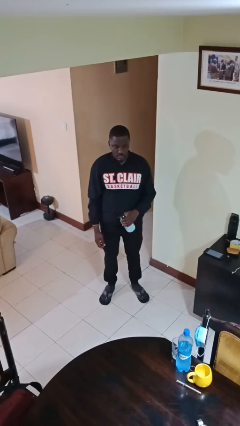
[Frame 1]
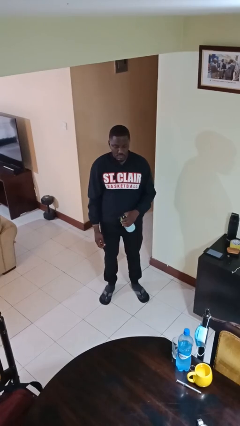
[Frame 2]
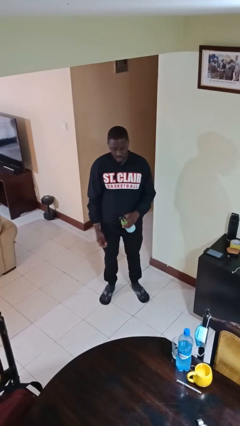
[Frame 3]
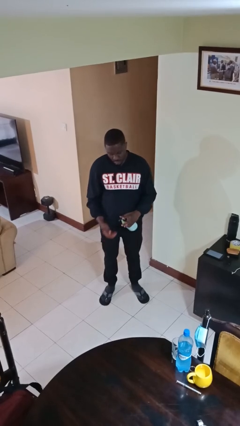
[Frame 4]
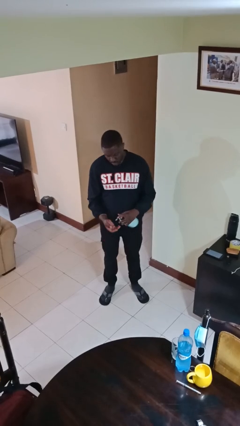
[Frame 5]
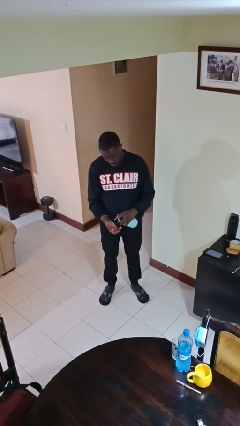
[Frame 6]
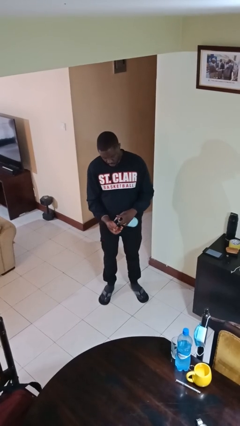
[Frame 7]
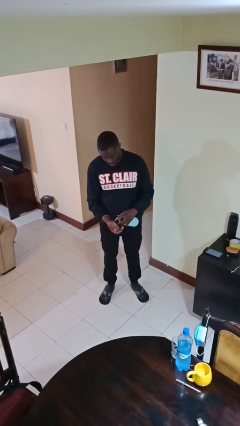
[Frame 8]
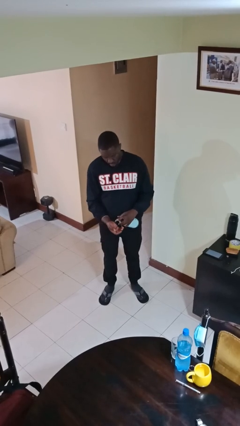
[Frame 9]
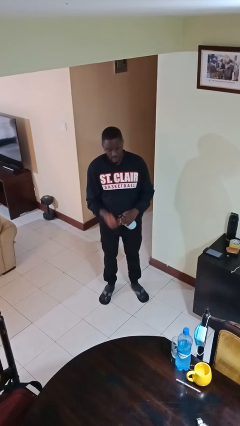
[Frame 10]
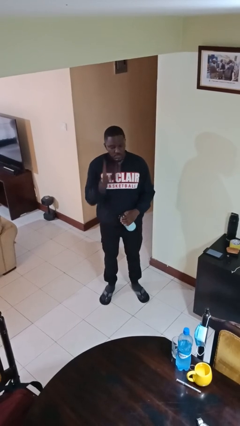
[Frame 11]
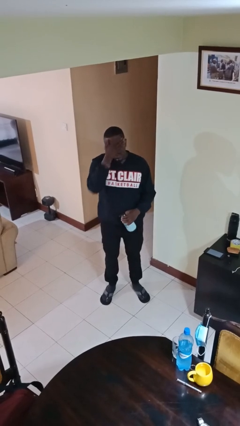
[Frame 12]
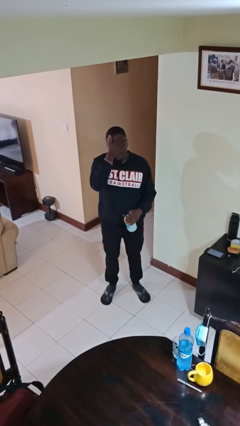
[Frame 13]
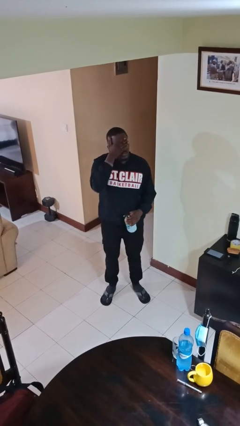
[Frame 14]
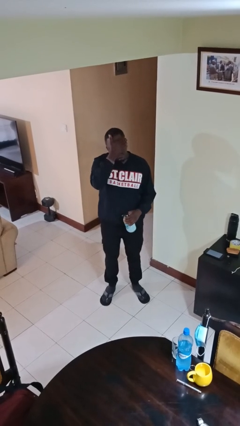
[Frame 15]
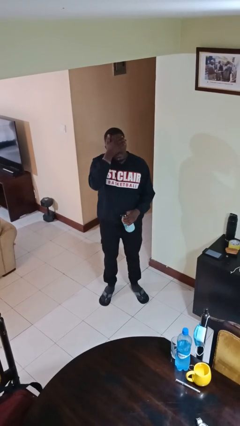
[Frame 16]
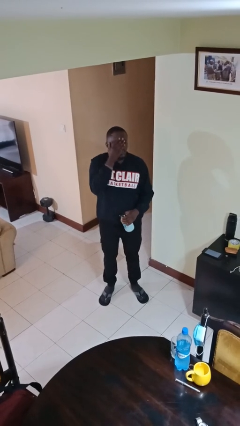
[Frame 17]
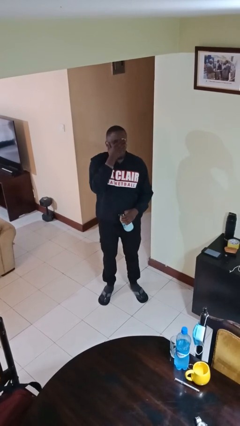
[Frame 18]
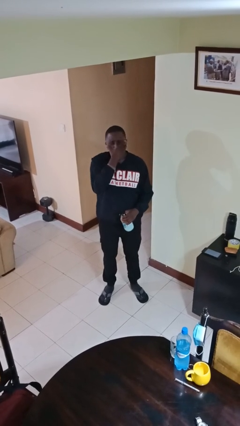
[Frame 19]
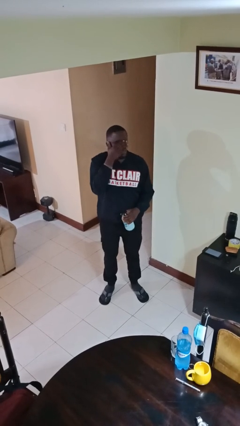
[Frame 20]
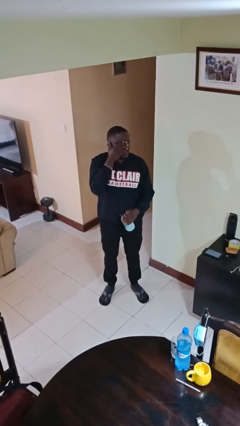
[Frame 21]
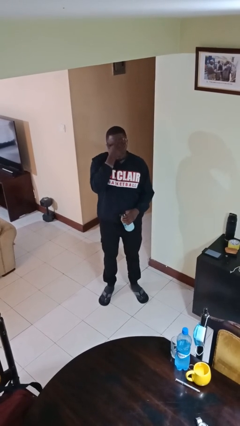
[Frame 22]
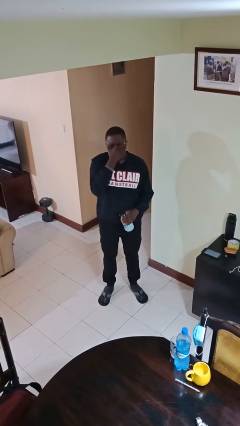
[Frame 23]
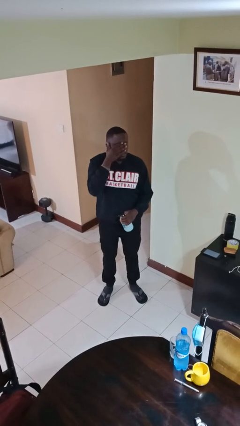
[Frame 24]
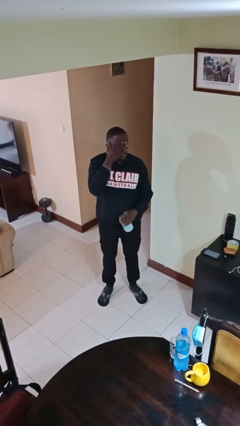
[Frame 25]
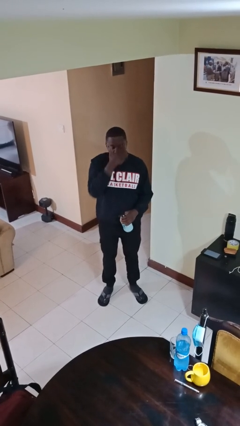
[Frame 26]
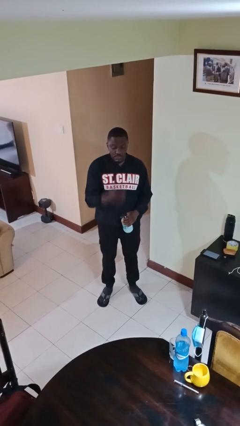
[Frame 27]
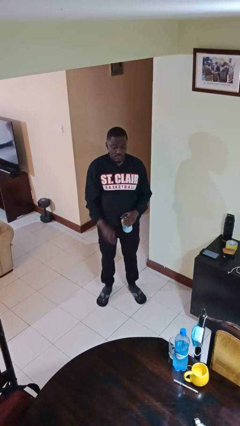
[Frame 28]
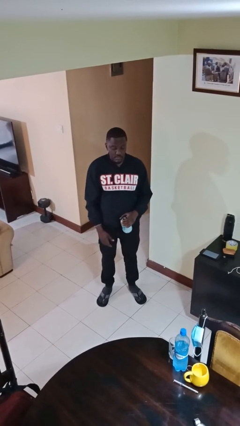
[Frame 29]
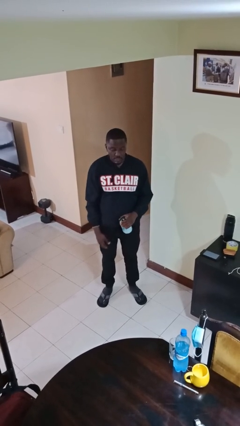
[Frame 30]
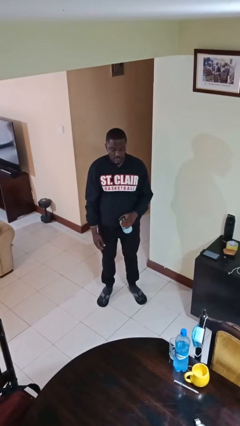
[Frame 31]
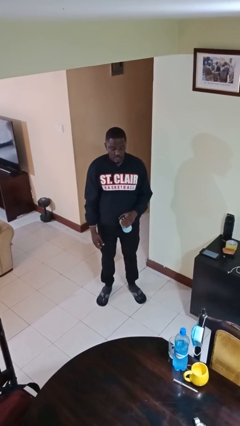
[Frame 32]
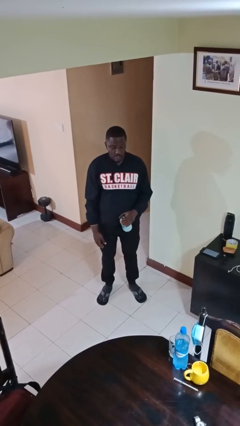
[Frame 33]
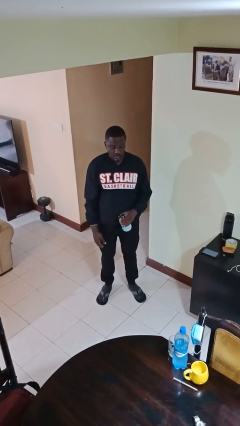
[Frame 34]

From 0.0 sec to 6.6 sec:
person applies facial moisturizer

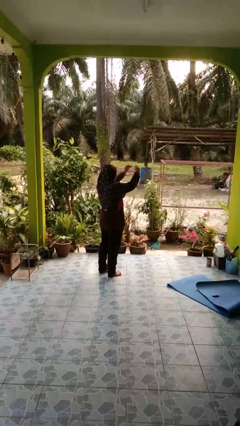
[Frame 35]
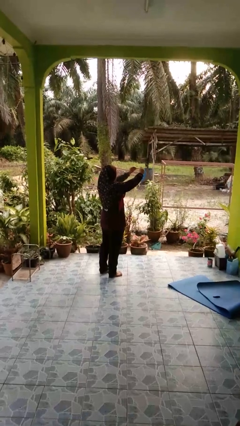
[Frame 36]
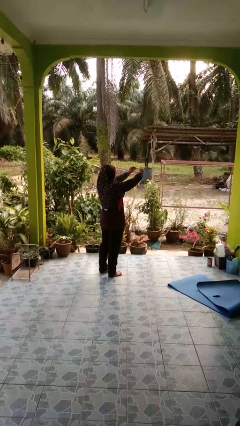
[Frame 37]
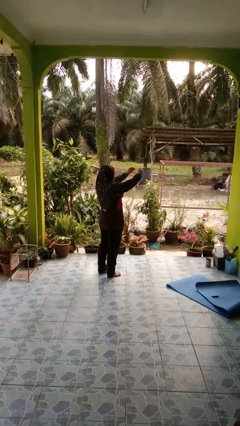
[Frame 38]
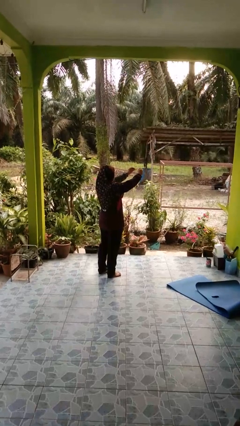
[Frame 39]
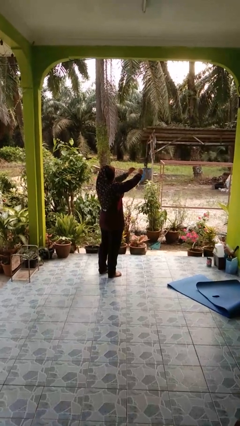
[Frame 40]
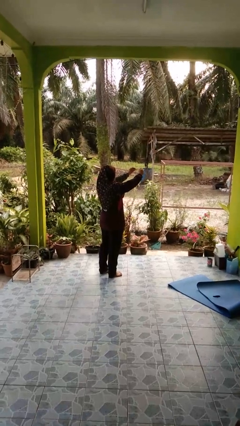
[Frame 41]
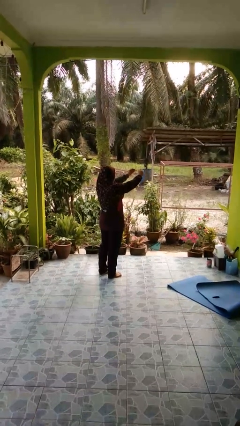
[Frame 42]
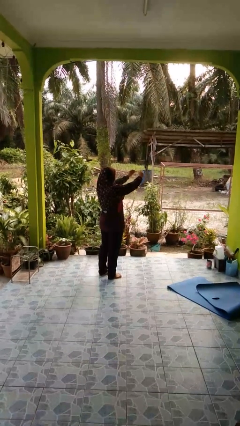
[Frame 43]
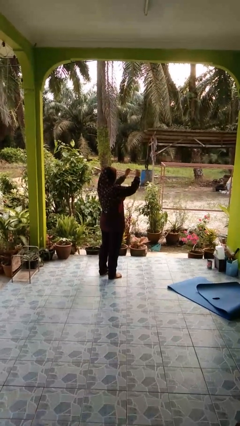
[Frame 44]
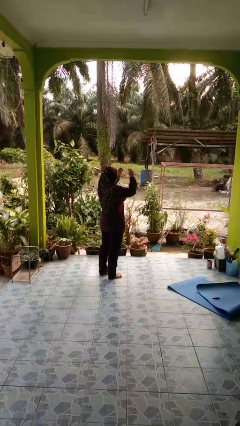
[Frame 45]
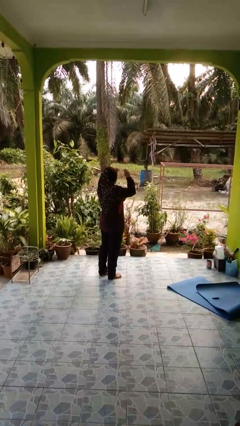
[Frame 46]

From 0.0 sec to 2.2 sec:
person takes off glasses

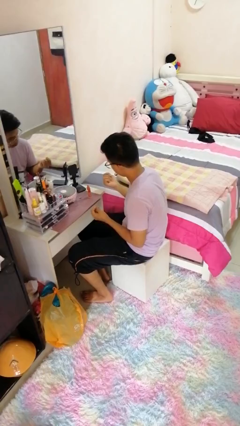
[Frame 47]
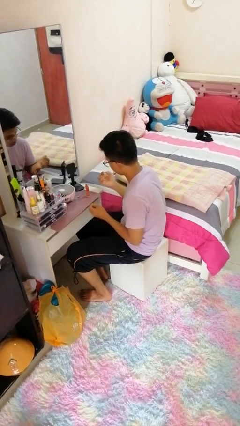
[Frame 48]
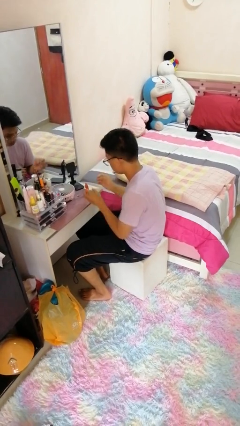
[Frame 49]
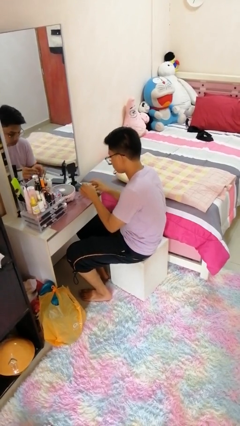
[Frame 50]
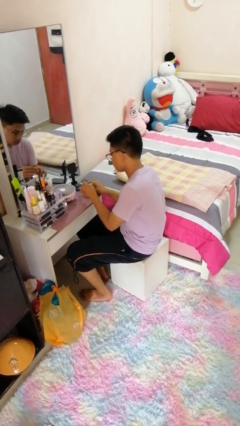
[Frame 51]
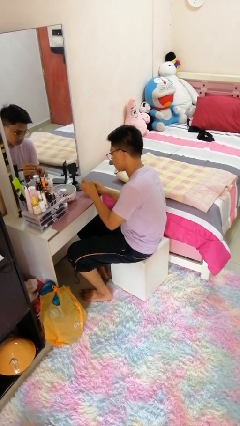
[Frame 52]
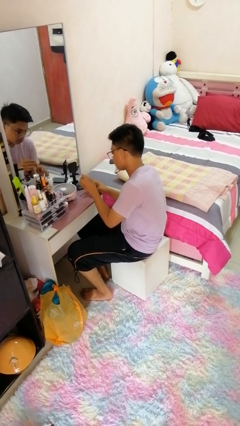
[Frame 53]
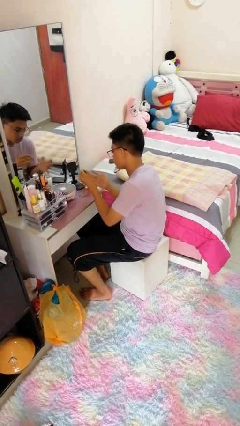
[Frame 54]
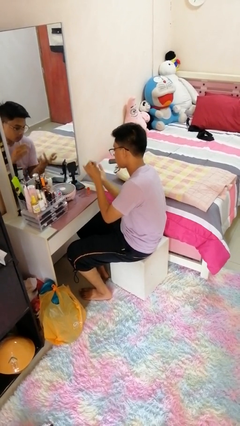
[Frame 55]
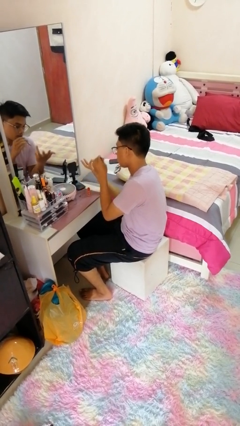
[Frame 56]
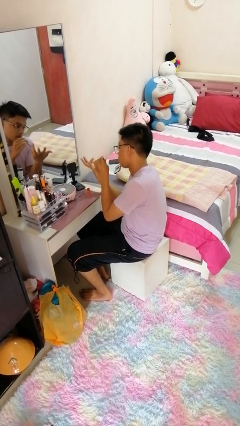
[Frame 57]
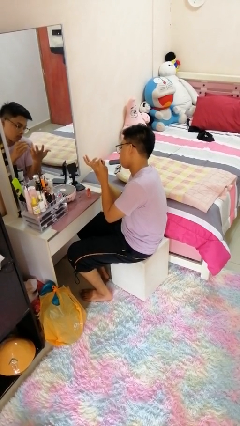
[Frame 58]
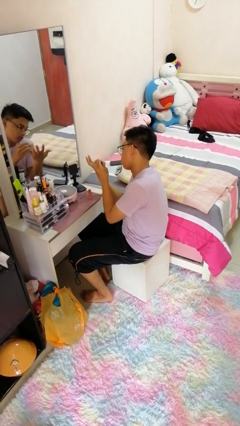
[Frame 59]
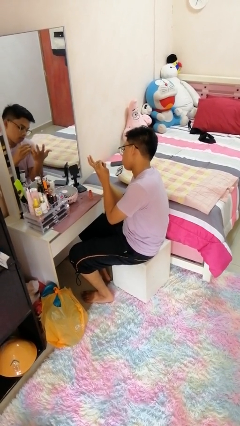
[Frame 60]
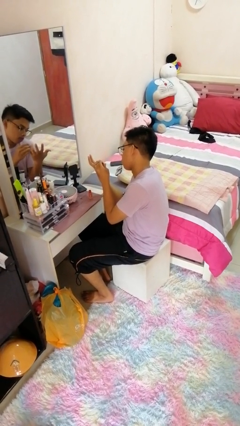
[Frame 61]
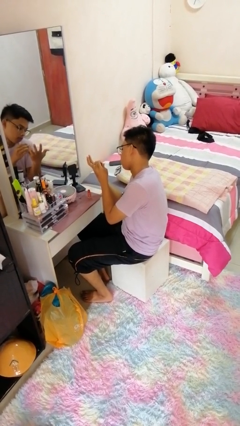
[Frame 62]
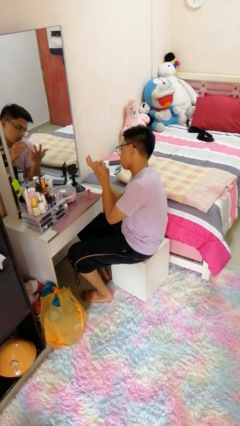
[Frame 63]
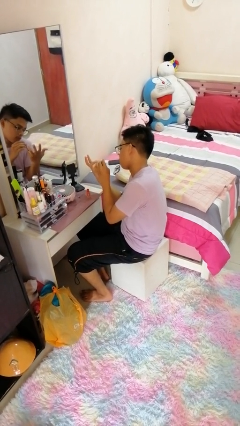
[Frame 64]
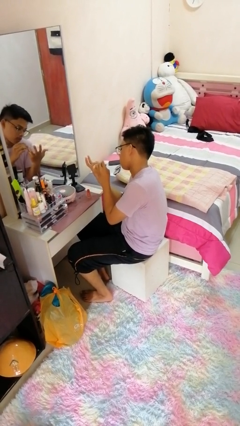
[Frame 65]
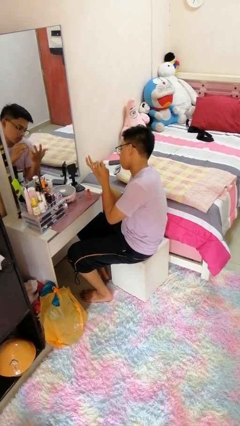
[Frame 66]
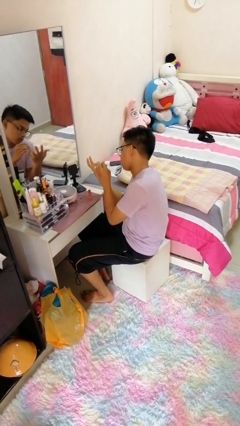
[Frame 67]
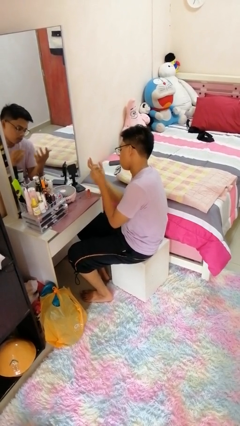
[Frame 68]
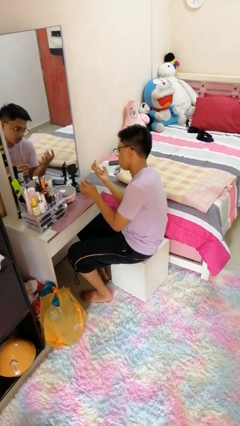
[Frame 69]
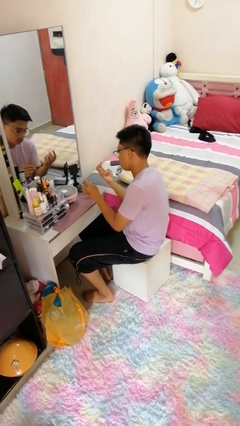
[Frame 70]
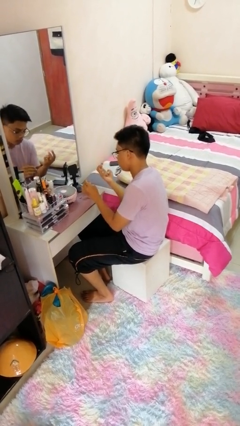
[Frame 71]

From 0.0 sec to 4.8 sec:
person paints fingernails

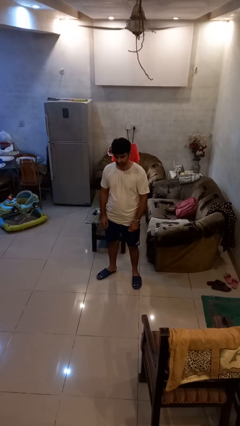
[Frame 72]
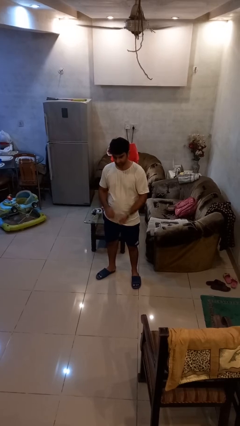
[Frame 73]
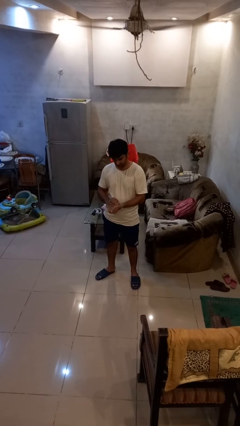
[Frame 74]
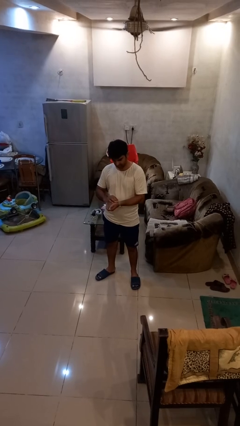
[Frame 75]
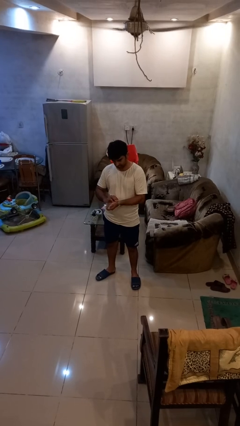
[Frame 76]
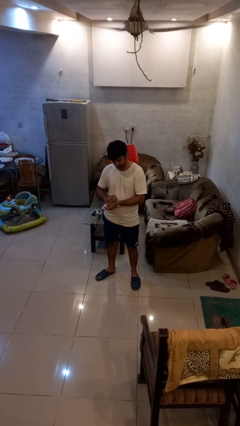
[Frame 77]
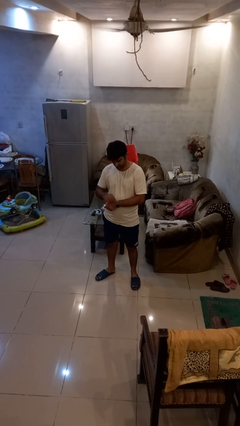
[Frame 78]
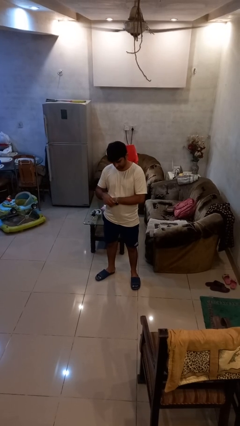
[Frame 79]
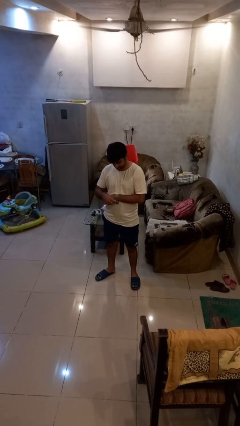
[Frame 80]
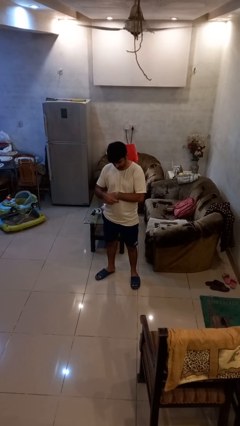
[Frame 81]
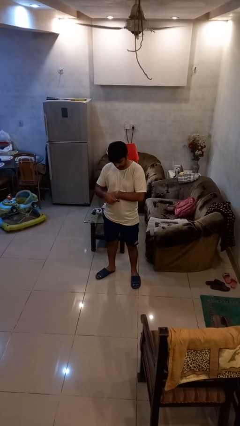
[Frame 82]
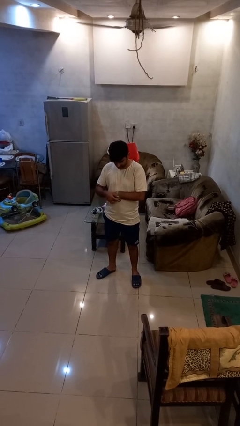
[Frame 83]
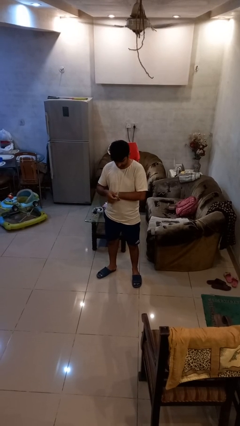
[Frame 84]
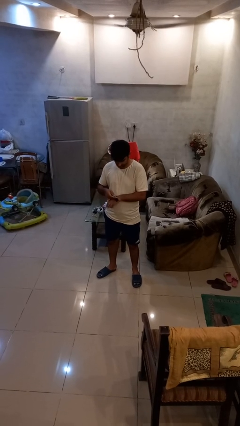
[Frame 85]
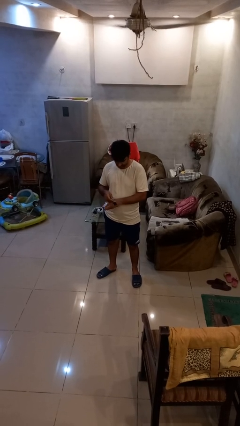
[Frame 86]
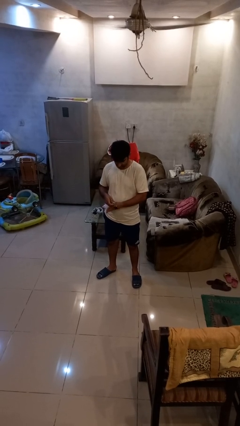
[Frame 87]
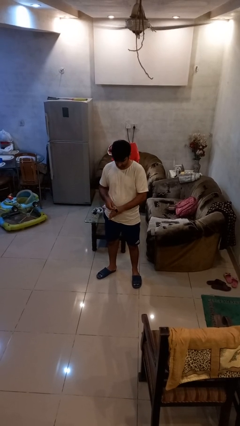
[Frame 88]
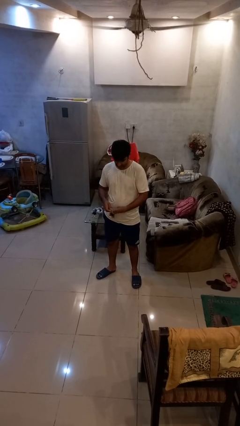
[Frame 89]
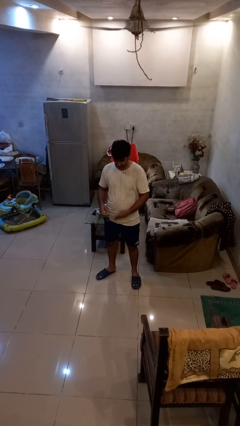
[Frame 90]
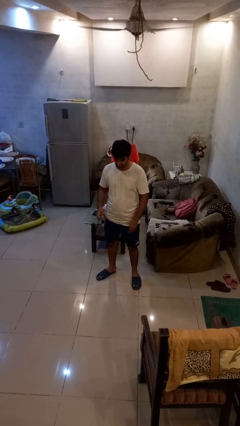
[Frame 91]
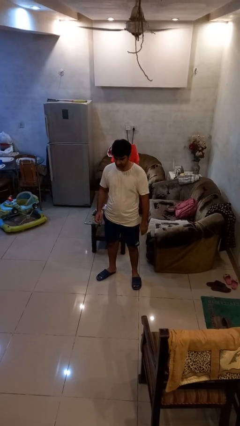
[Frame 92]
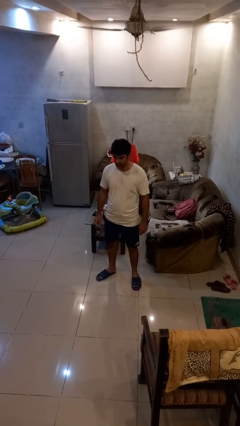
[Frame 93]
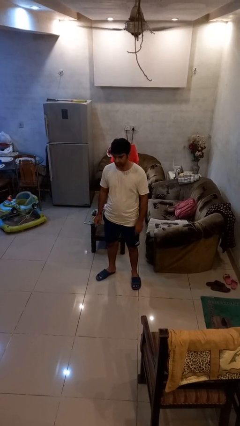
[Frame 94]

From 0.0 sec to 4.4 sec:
person takes off wristwatch

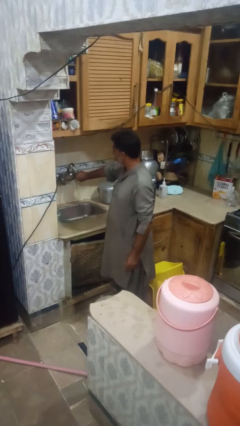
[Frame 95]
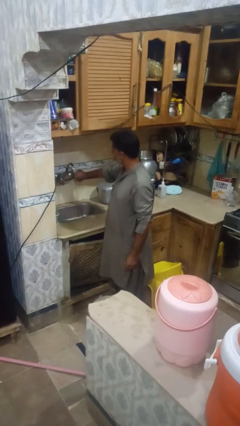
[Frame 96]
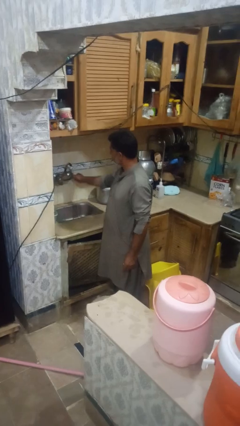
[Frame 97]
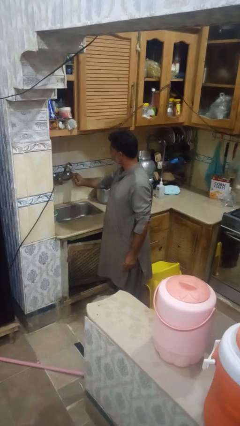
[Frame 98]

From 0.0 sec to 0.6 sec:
person turns off faucet
